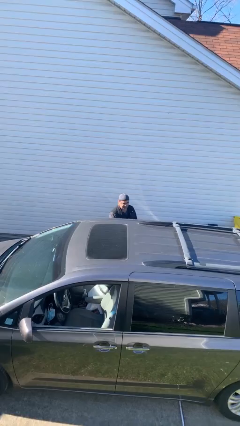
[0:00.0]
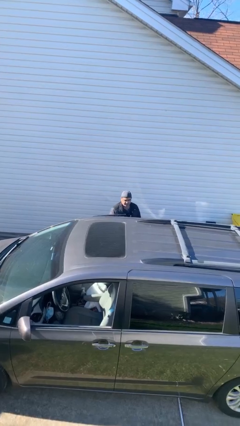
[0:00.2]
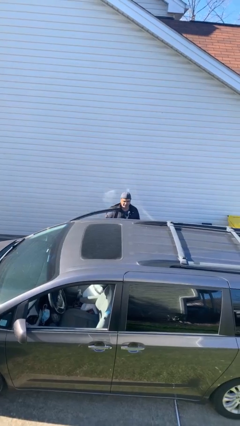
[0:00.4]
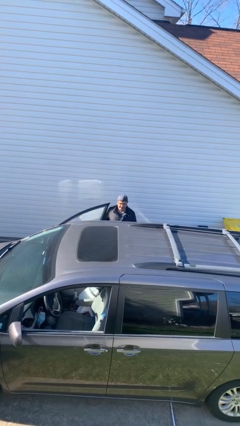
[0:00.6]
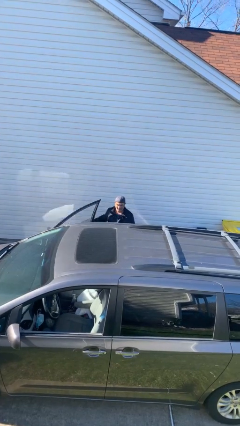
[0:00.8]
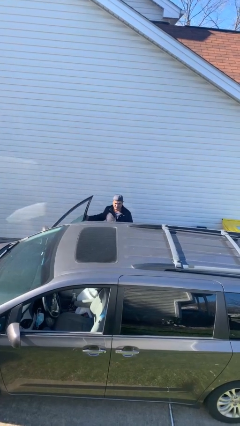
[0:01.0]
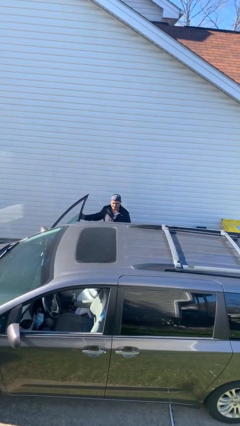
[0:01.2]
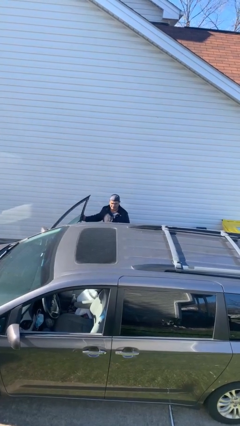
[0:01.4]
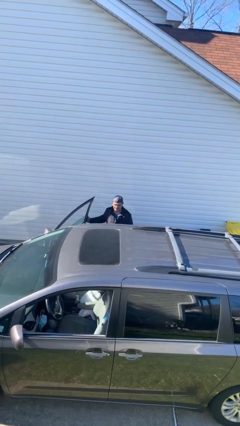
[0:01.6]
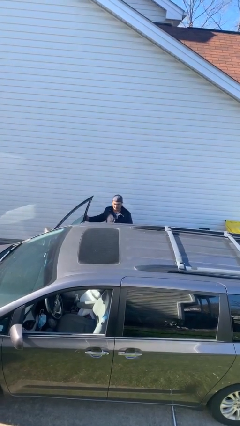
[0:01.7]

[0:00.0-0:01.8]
person opens car door

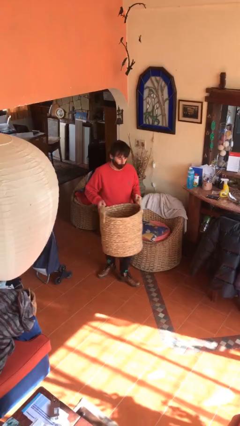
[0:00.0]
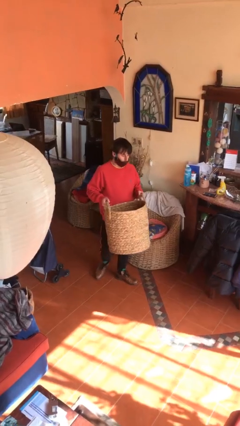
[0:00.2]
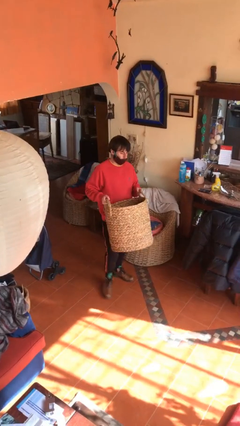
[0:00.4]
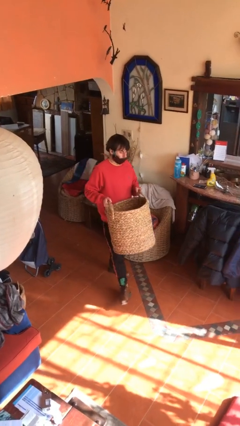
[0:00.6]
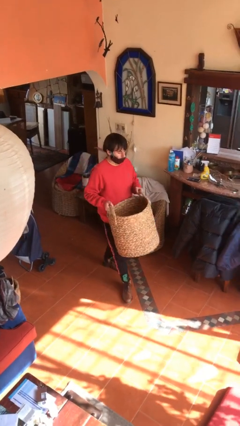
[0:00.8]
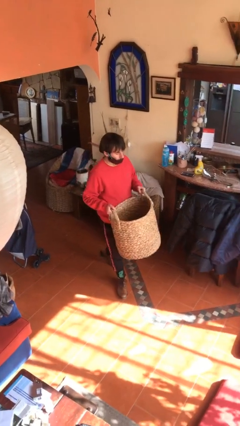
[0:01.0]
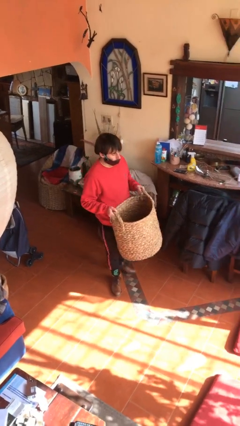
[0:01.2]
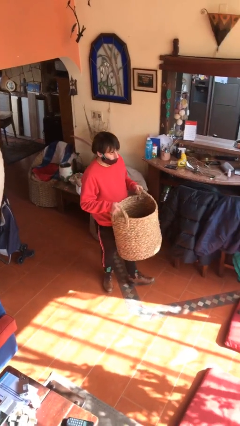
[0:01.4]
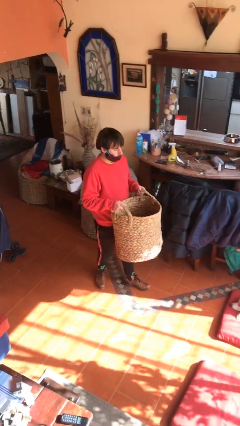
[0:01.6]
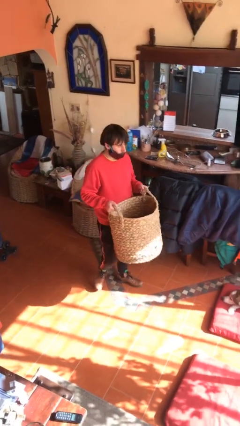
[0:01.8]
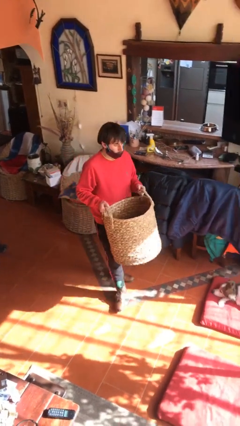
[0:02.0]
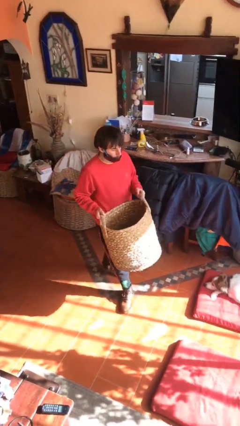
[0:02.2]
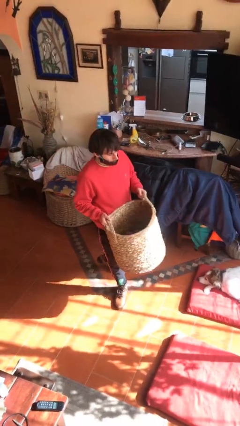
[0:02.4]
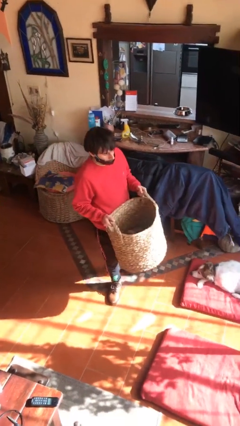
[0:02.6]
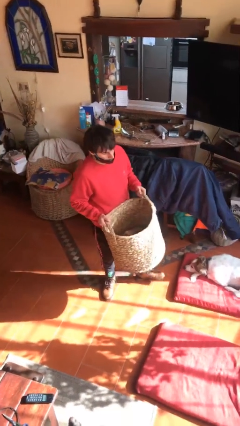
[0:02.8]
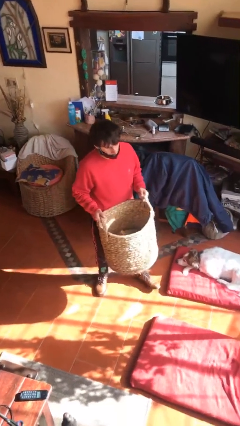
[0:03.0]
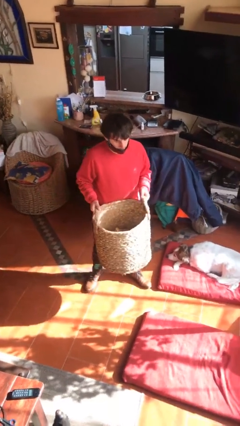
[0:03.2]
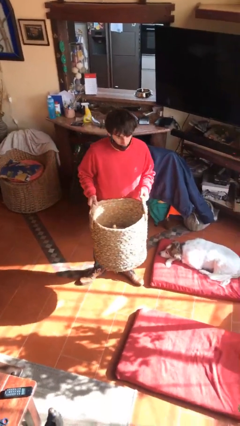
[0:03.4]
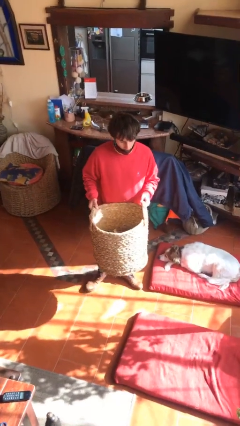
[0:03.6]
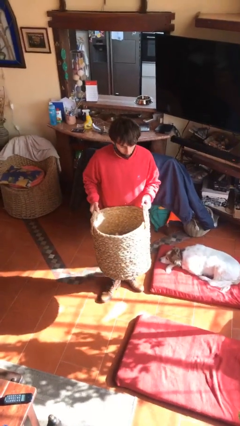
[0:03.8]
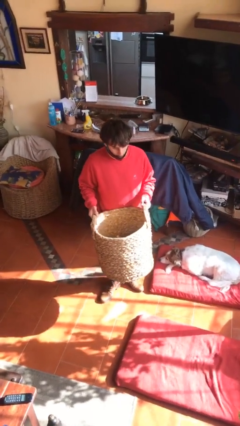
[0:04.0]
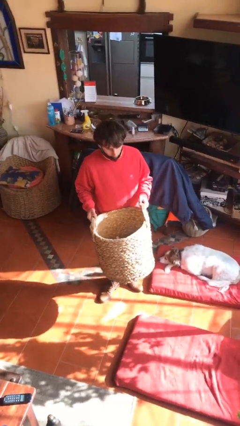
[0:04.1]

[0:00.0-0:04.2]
person carries laundry basket

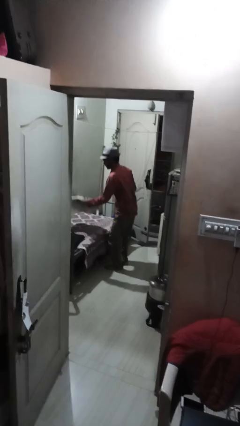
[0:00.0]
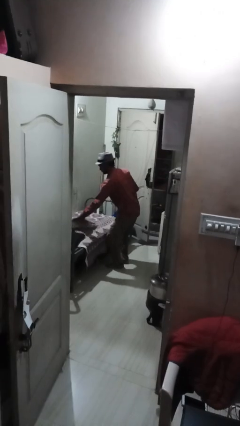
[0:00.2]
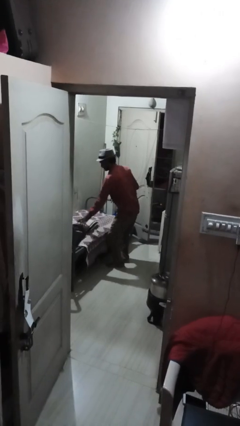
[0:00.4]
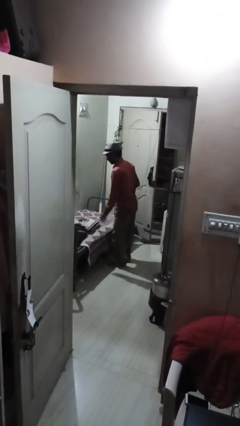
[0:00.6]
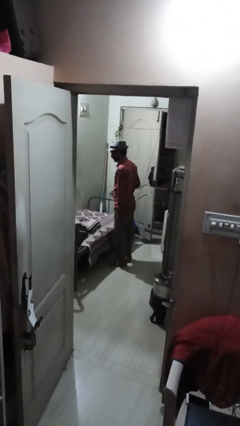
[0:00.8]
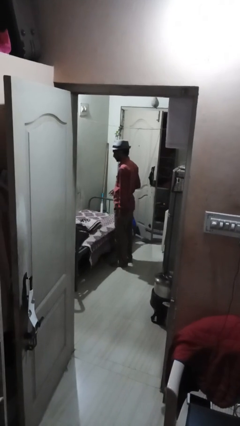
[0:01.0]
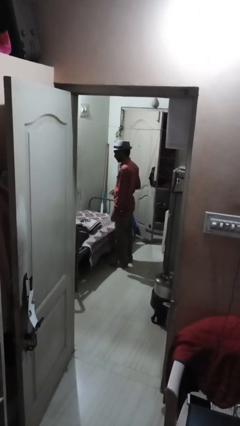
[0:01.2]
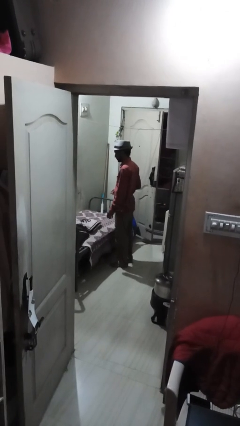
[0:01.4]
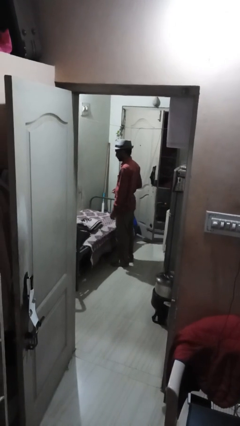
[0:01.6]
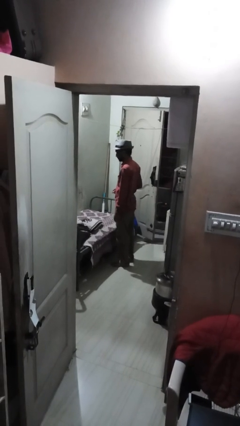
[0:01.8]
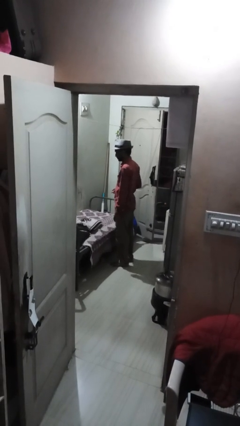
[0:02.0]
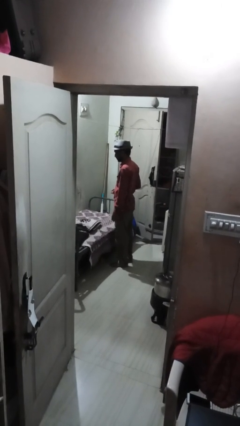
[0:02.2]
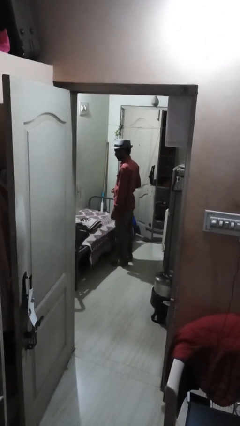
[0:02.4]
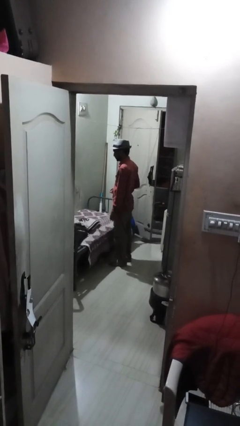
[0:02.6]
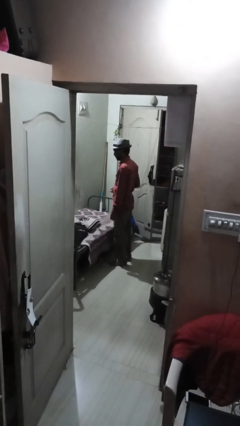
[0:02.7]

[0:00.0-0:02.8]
person puts down object on bed

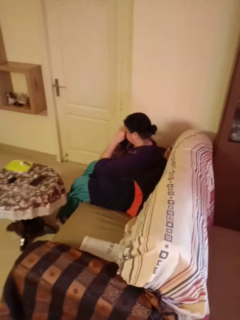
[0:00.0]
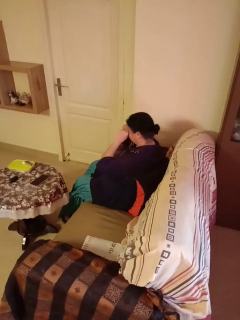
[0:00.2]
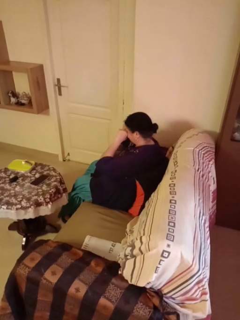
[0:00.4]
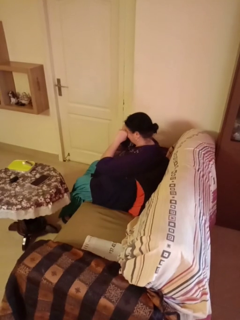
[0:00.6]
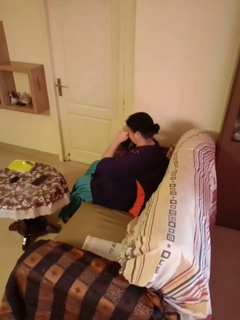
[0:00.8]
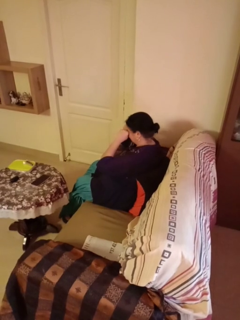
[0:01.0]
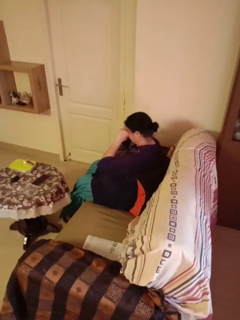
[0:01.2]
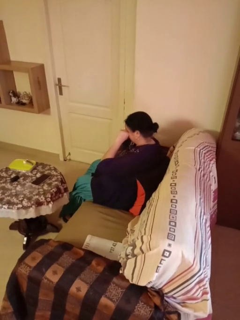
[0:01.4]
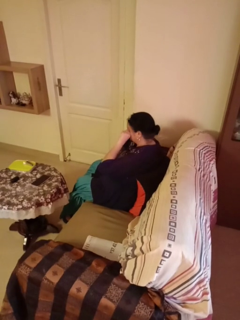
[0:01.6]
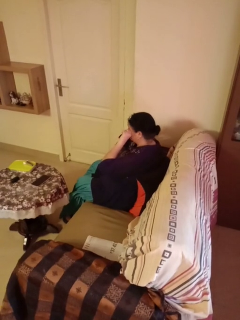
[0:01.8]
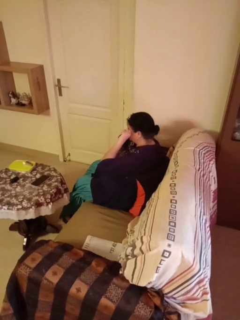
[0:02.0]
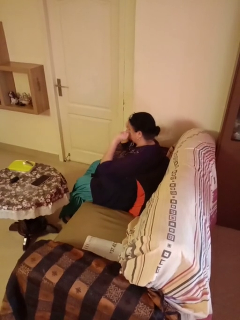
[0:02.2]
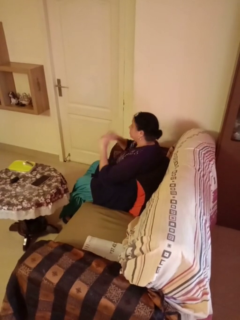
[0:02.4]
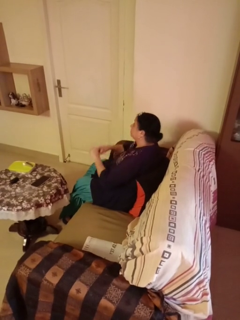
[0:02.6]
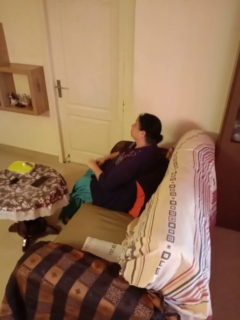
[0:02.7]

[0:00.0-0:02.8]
person rubs eyes

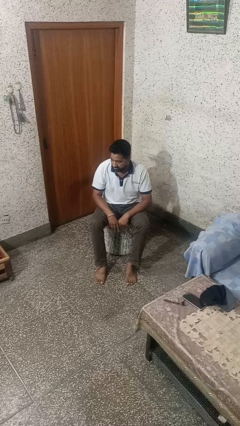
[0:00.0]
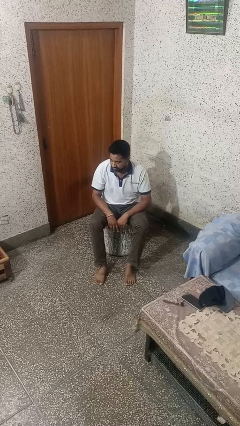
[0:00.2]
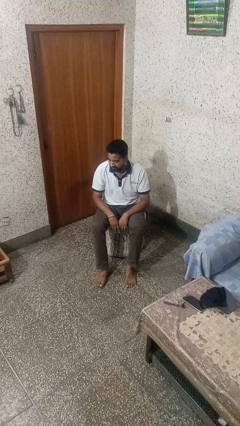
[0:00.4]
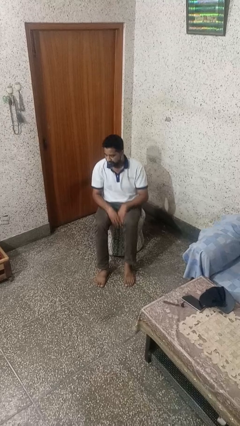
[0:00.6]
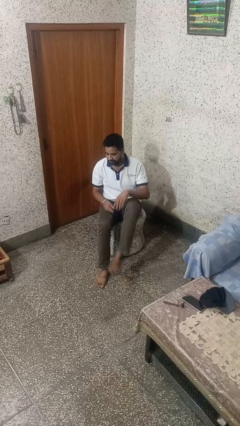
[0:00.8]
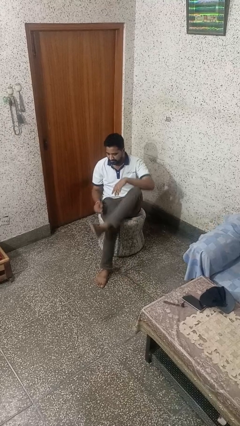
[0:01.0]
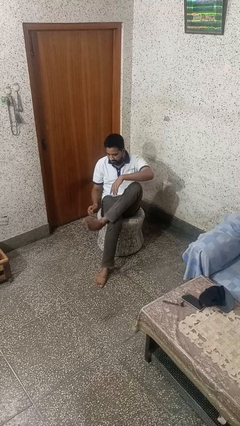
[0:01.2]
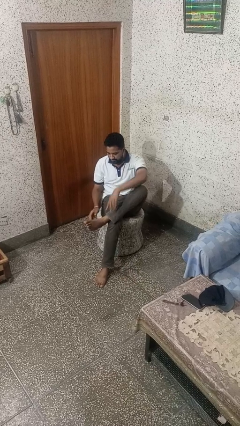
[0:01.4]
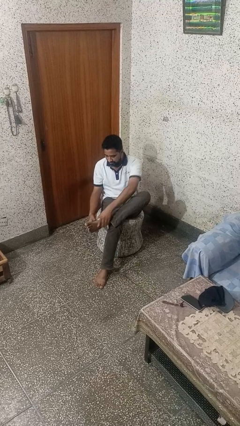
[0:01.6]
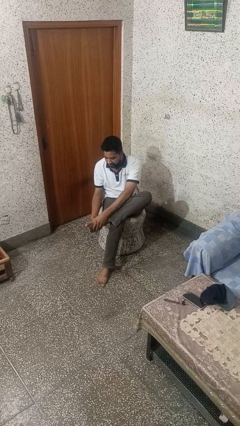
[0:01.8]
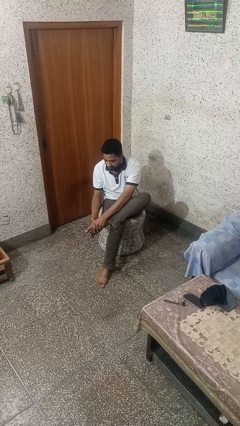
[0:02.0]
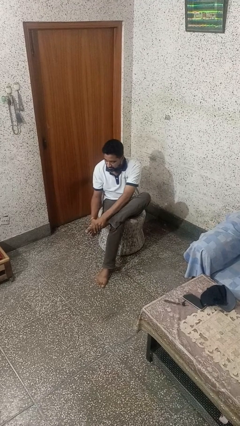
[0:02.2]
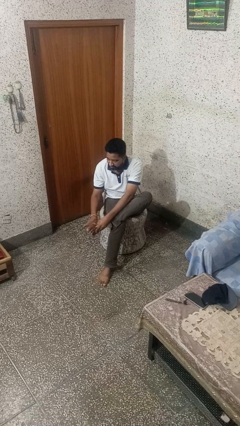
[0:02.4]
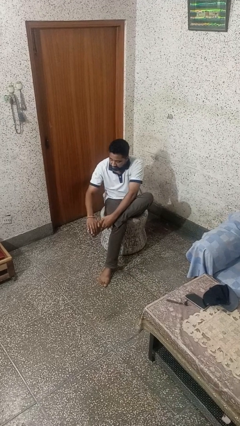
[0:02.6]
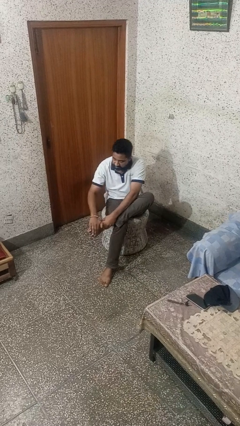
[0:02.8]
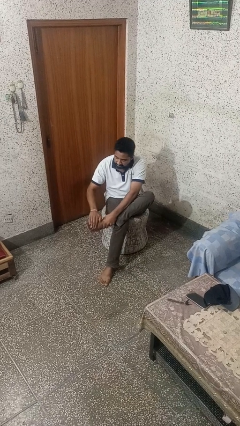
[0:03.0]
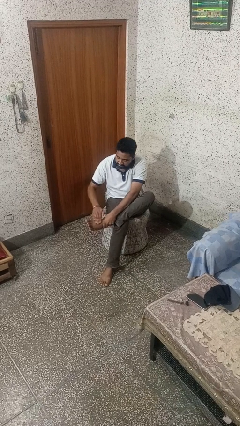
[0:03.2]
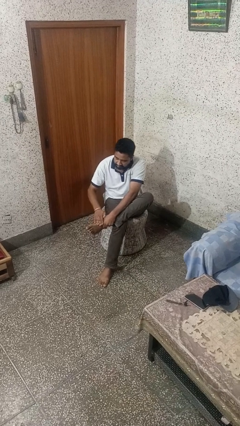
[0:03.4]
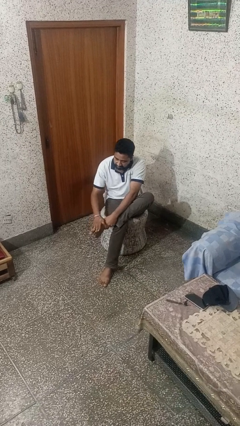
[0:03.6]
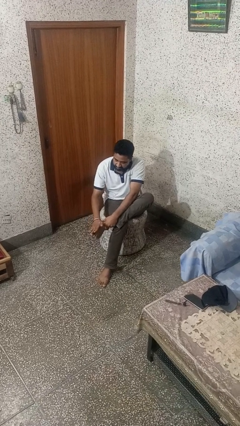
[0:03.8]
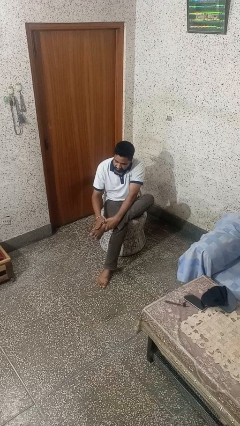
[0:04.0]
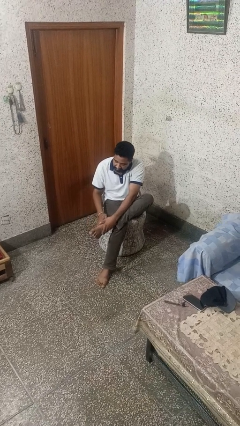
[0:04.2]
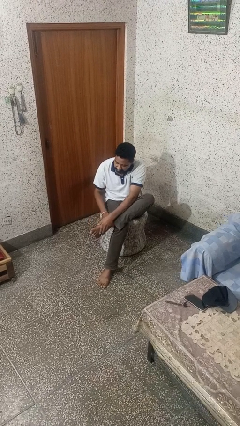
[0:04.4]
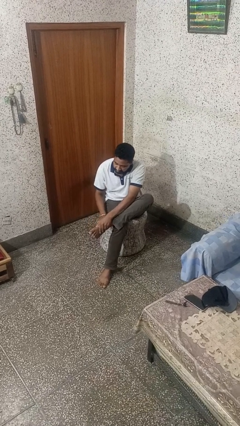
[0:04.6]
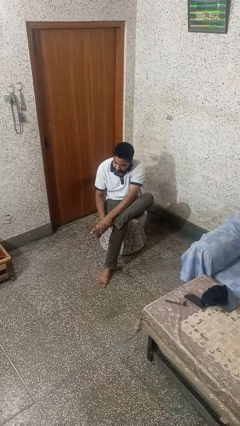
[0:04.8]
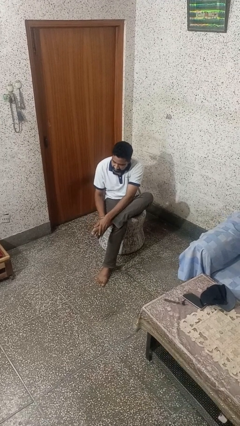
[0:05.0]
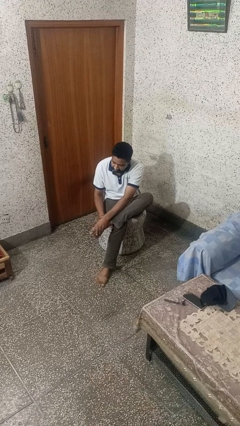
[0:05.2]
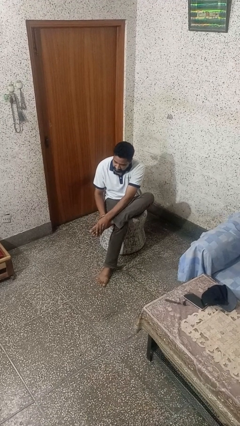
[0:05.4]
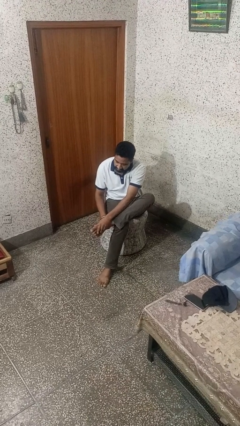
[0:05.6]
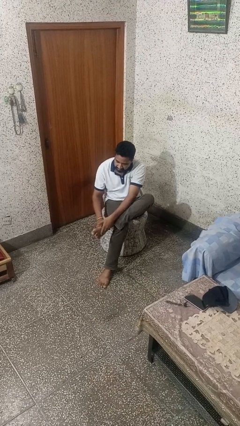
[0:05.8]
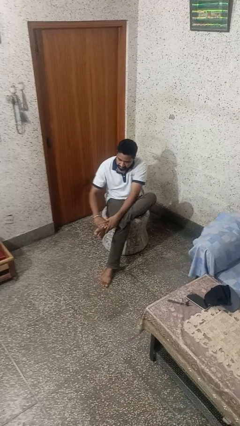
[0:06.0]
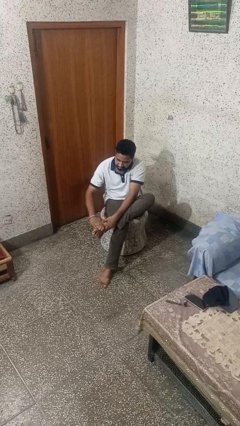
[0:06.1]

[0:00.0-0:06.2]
person rubs foot
